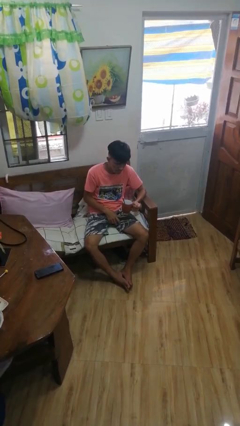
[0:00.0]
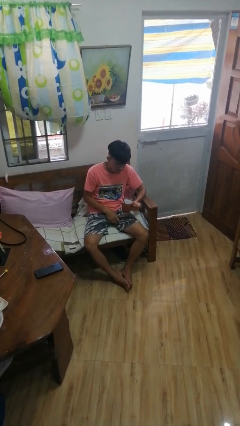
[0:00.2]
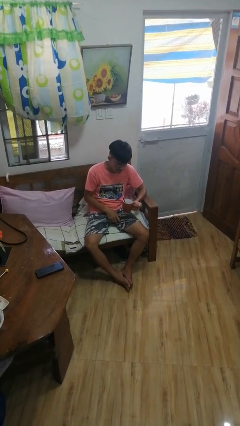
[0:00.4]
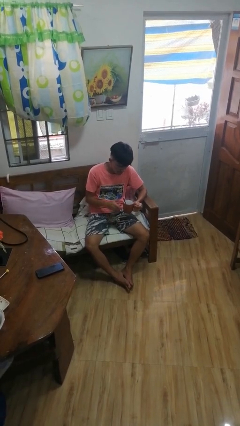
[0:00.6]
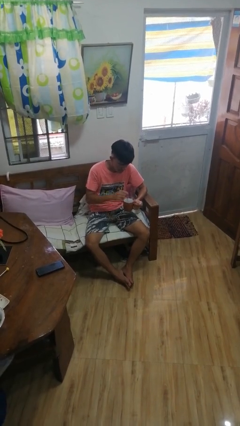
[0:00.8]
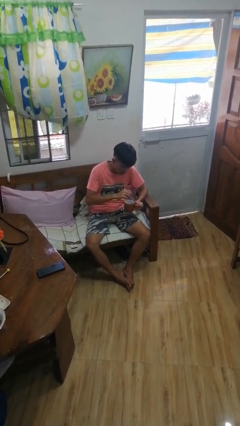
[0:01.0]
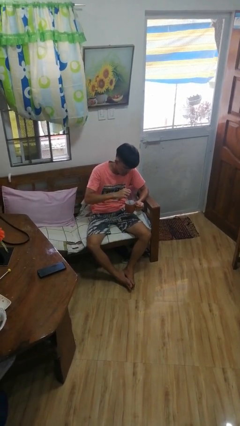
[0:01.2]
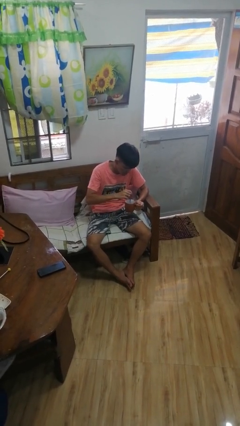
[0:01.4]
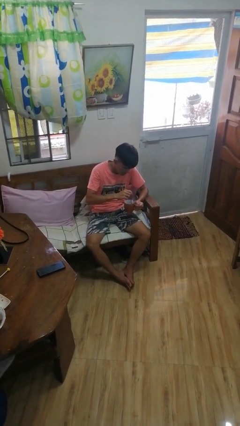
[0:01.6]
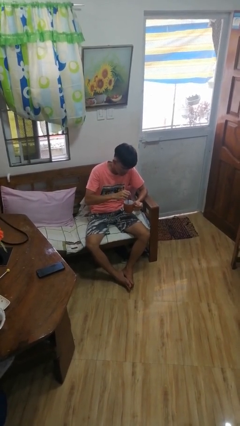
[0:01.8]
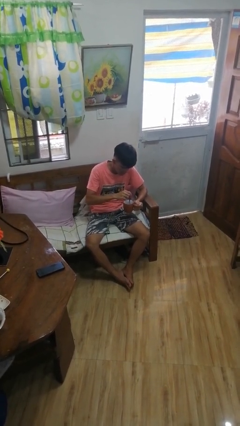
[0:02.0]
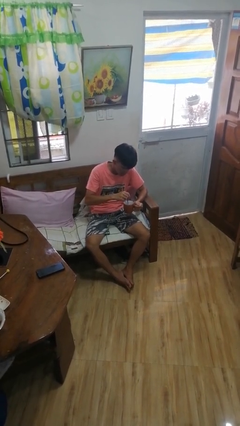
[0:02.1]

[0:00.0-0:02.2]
person stirs mug

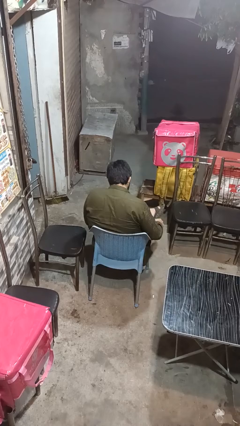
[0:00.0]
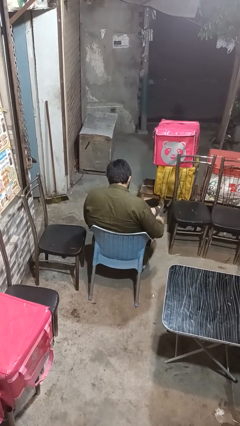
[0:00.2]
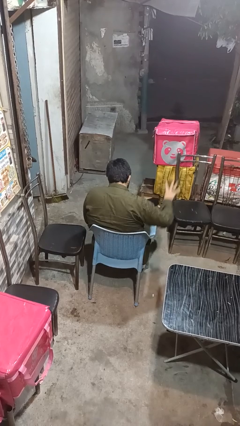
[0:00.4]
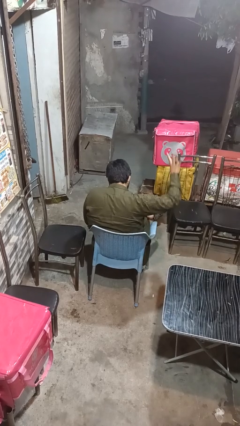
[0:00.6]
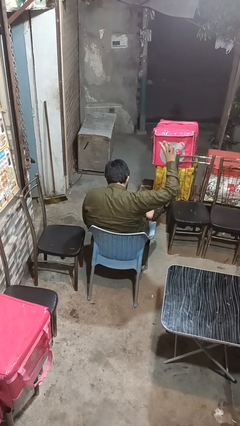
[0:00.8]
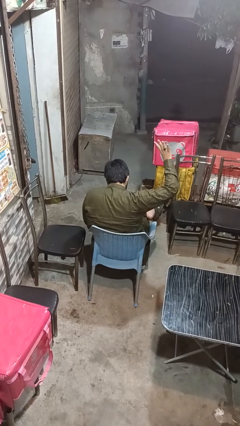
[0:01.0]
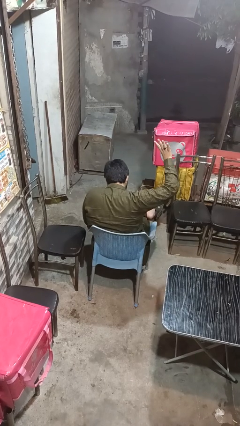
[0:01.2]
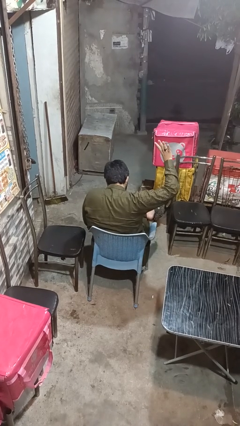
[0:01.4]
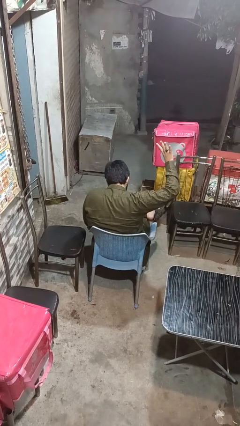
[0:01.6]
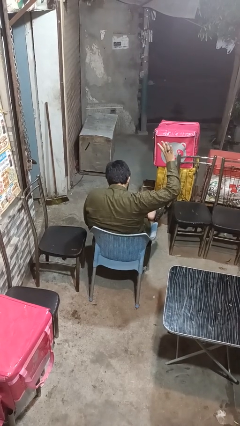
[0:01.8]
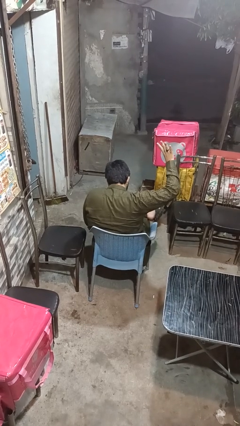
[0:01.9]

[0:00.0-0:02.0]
person gestures number four

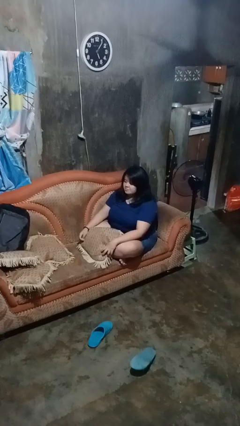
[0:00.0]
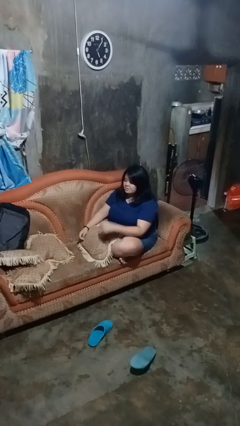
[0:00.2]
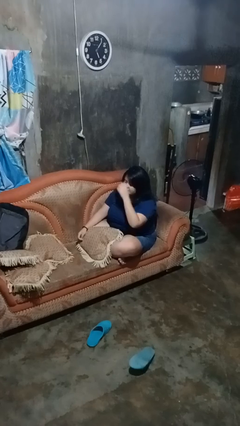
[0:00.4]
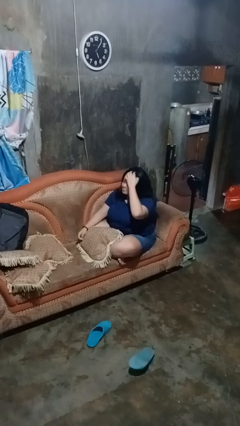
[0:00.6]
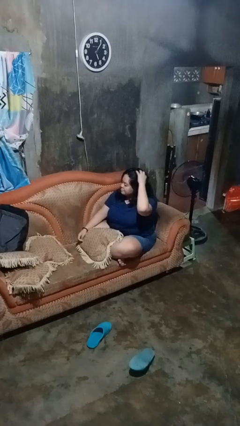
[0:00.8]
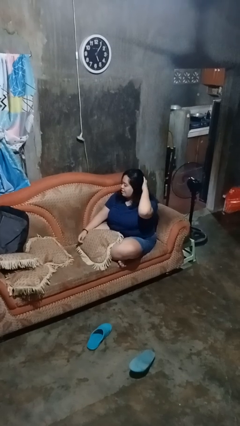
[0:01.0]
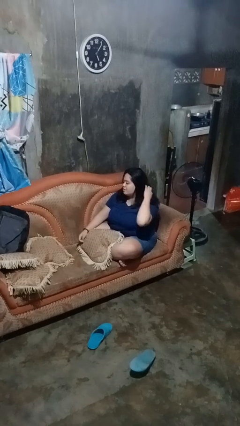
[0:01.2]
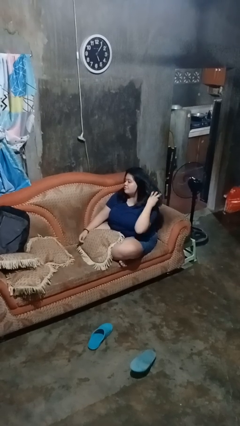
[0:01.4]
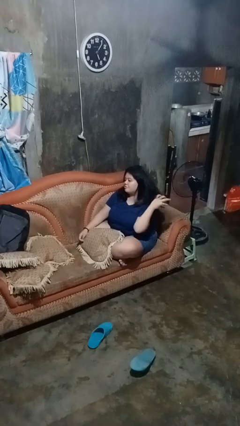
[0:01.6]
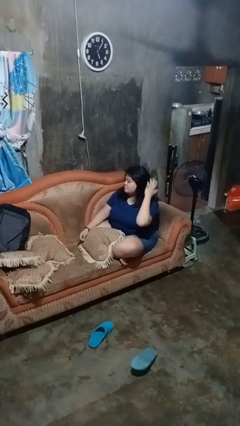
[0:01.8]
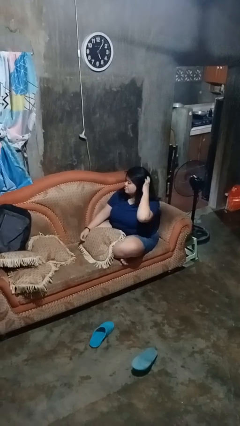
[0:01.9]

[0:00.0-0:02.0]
person strokes hair

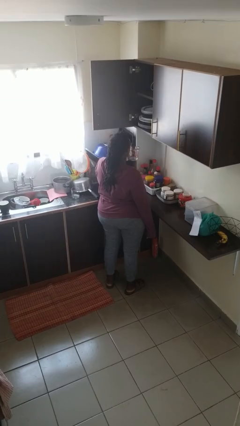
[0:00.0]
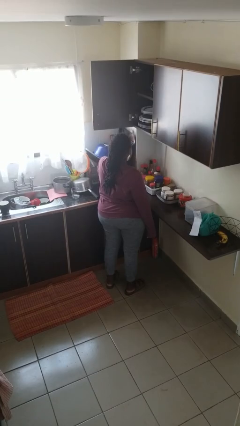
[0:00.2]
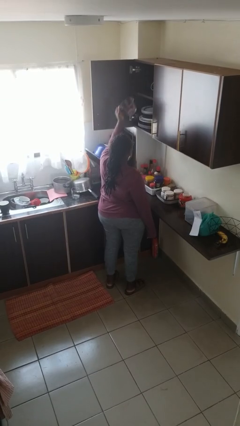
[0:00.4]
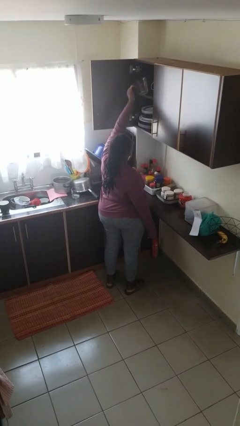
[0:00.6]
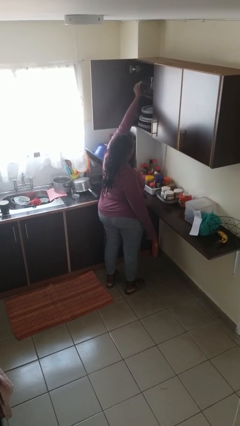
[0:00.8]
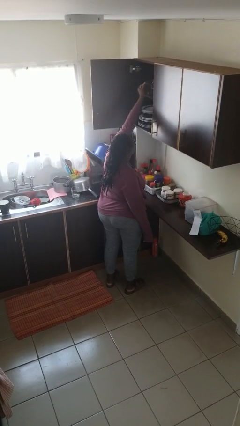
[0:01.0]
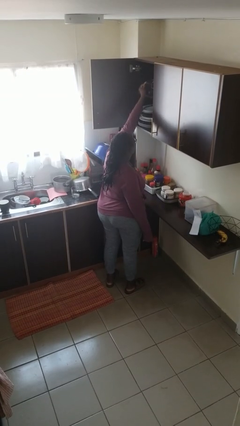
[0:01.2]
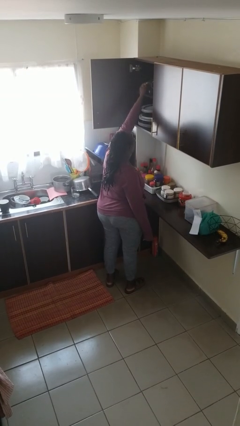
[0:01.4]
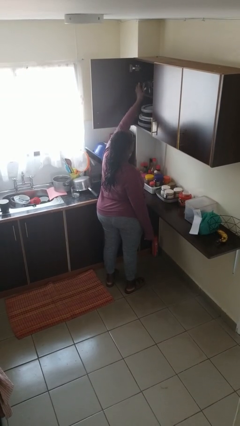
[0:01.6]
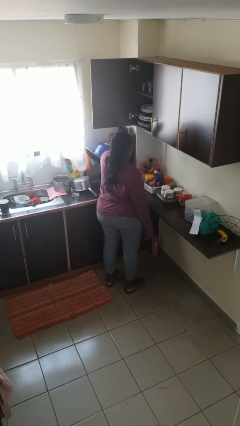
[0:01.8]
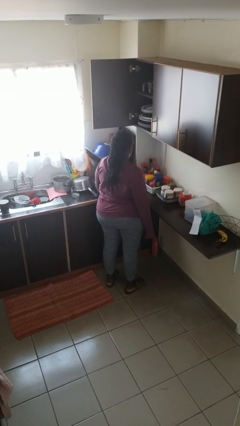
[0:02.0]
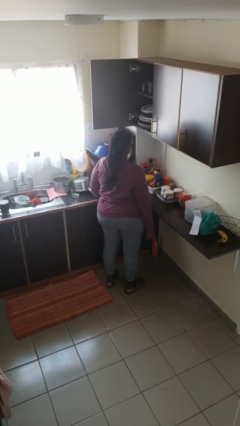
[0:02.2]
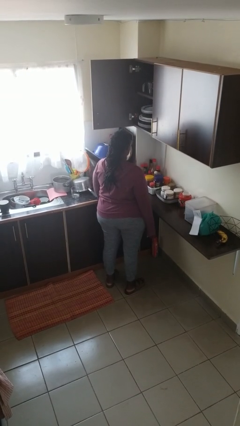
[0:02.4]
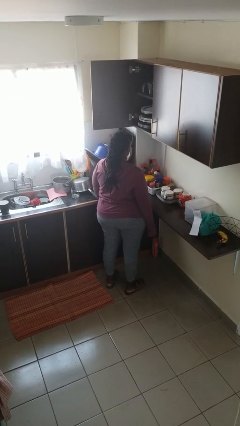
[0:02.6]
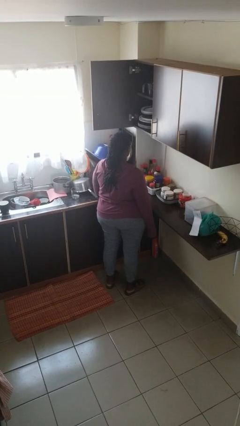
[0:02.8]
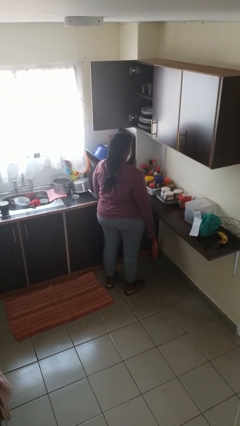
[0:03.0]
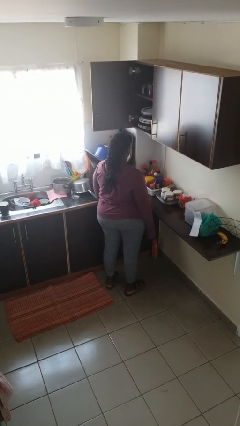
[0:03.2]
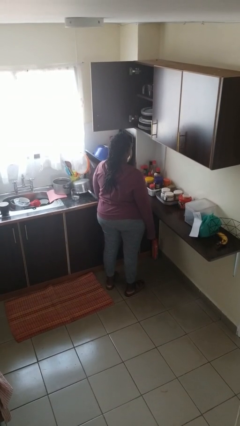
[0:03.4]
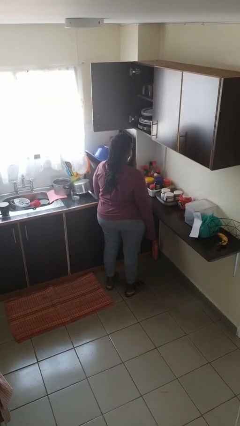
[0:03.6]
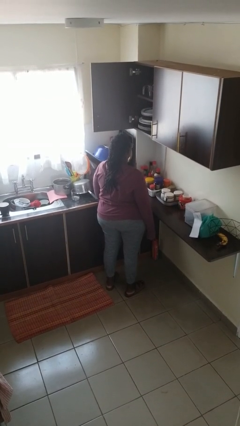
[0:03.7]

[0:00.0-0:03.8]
person puts down object into cabinet

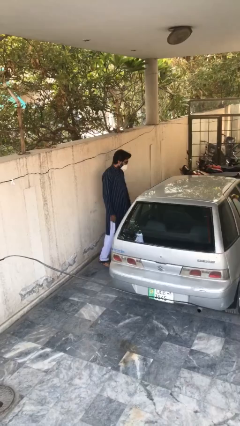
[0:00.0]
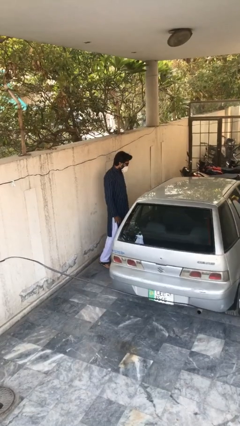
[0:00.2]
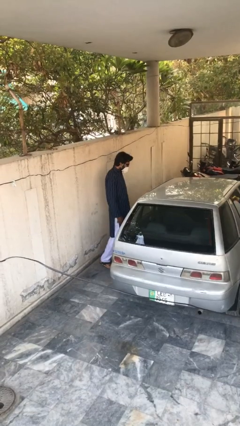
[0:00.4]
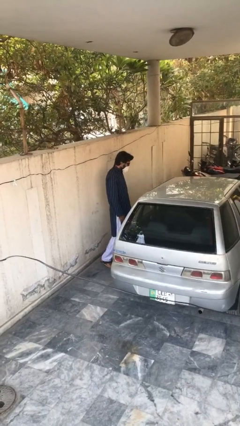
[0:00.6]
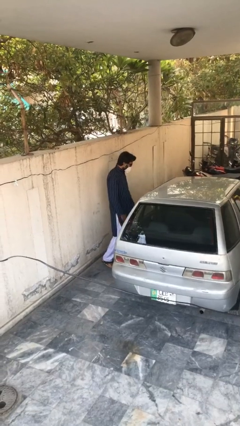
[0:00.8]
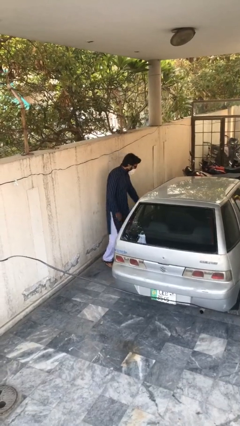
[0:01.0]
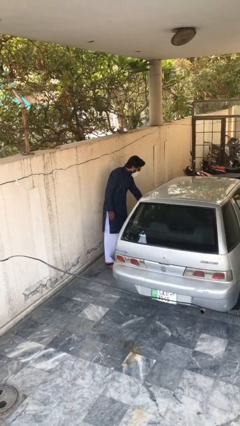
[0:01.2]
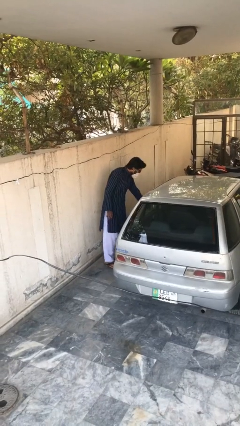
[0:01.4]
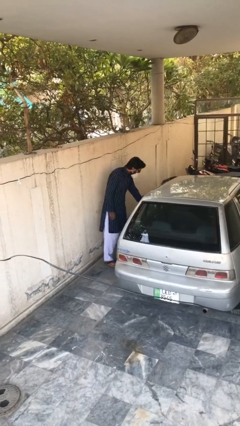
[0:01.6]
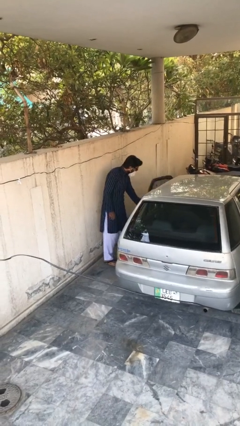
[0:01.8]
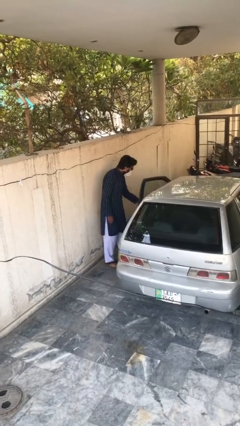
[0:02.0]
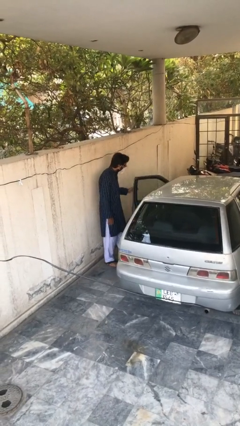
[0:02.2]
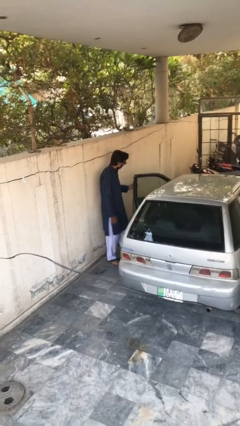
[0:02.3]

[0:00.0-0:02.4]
person opens car door

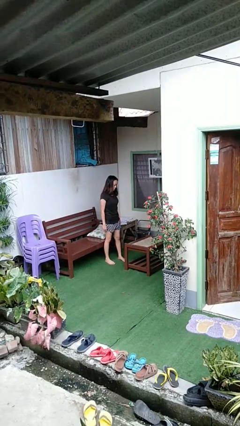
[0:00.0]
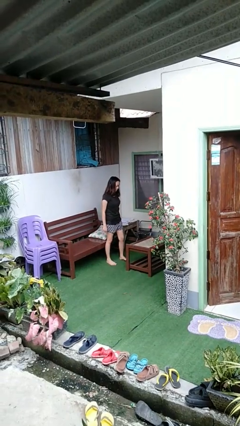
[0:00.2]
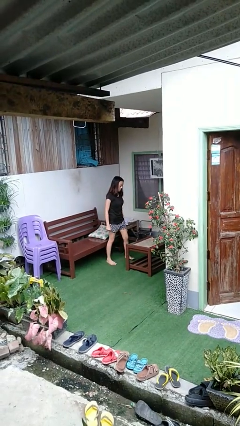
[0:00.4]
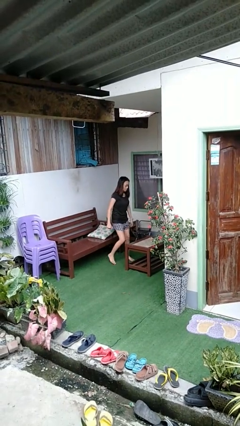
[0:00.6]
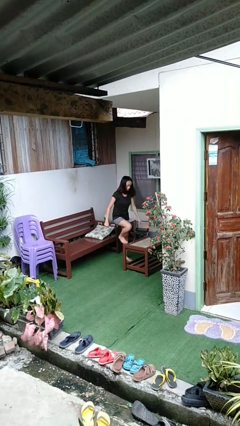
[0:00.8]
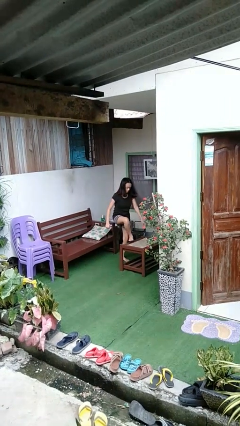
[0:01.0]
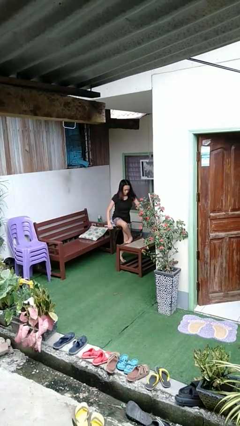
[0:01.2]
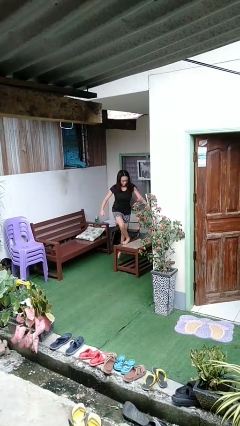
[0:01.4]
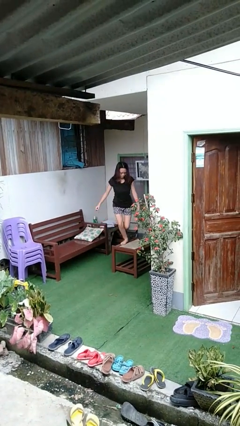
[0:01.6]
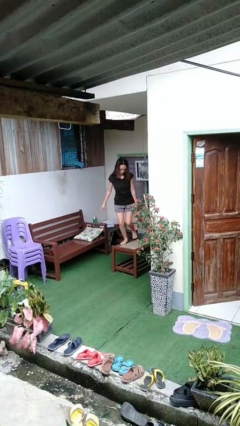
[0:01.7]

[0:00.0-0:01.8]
person climbs on table

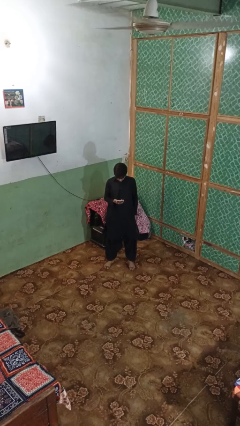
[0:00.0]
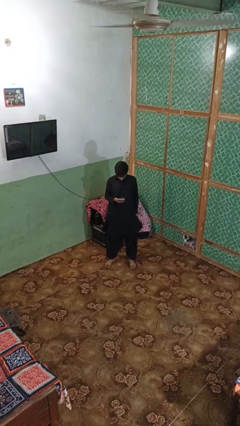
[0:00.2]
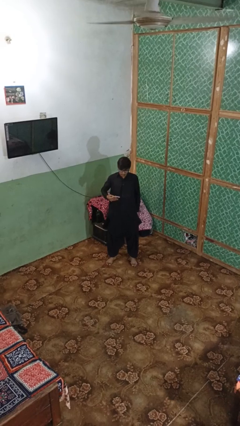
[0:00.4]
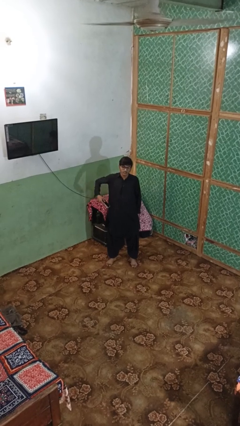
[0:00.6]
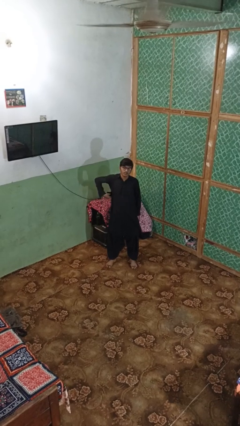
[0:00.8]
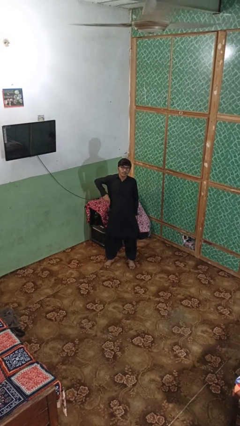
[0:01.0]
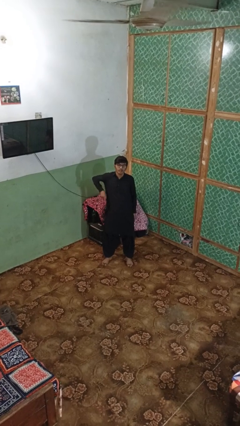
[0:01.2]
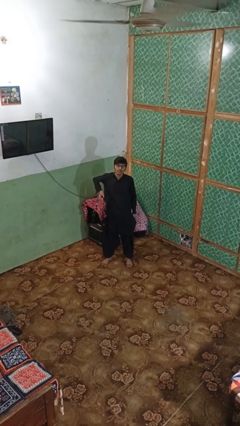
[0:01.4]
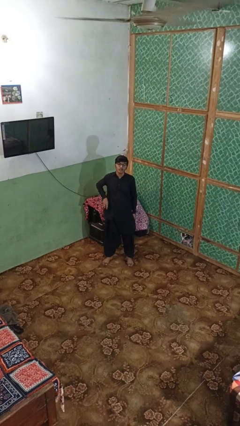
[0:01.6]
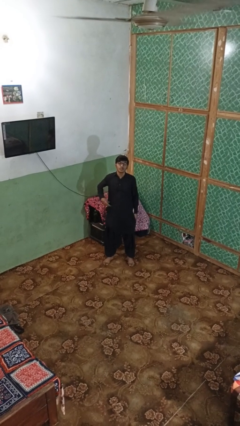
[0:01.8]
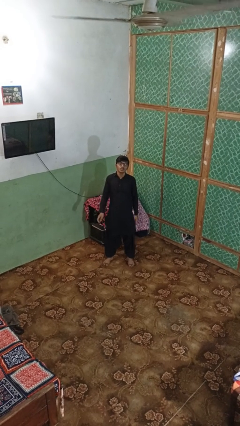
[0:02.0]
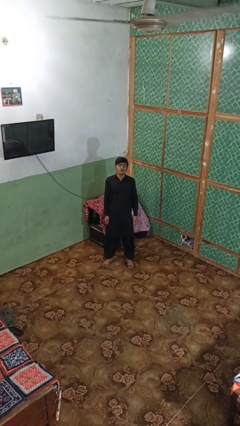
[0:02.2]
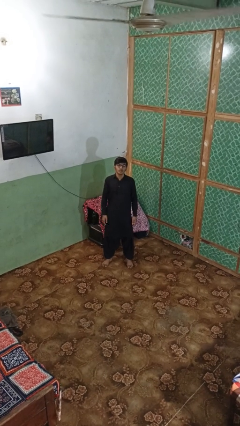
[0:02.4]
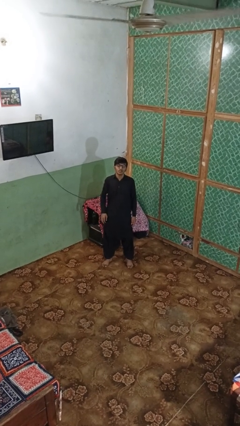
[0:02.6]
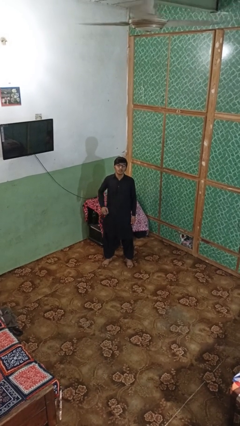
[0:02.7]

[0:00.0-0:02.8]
person puts phone into pocket

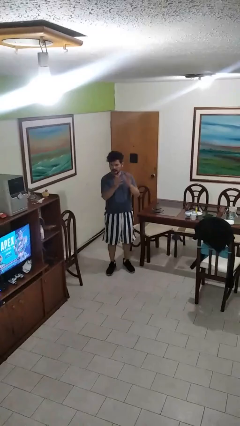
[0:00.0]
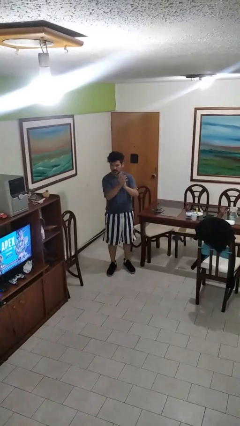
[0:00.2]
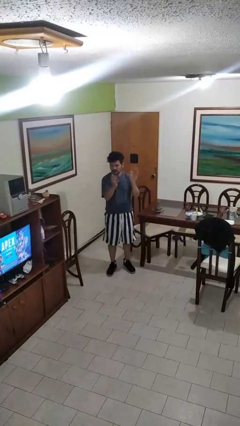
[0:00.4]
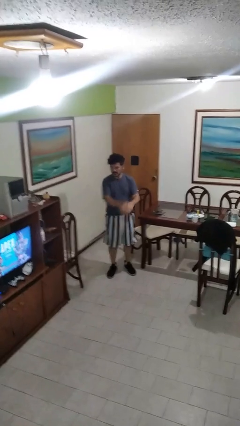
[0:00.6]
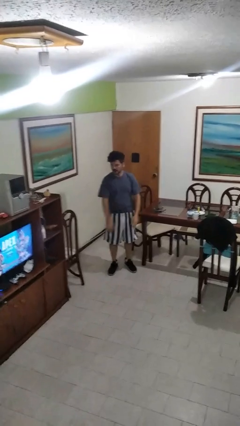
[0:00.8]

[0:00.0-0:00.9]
person claps hands
